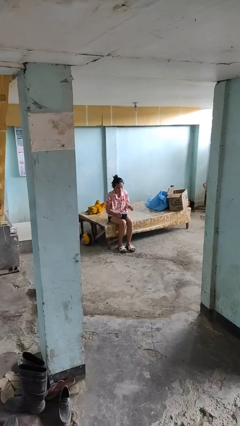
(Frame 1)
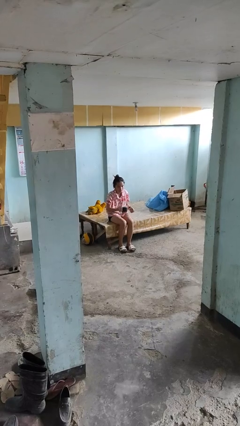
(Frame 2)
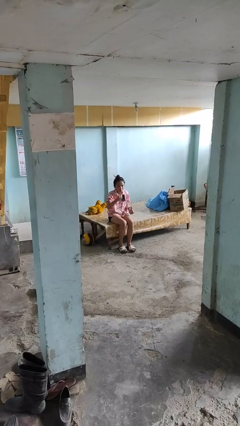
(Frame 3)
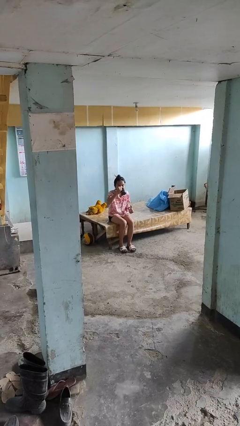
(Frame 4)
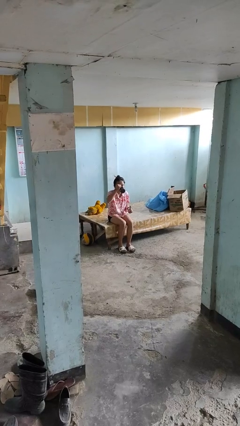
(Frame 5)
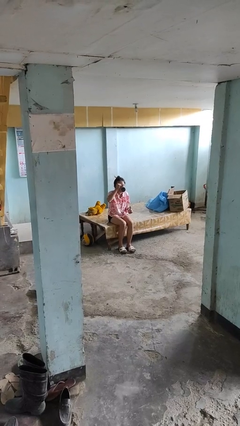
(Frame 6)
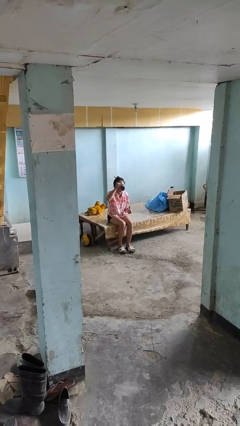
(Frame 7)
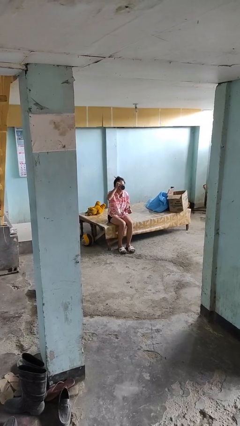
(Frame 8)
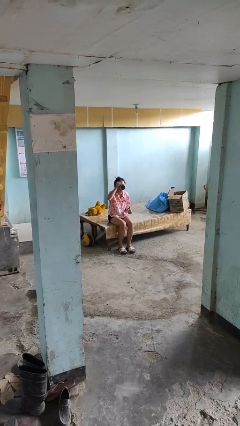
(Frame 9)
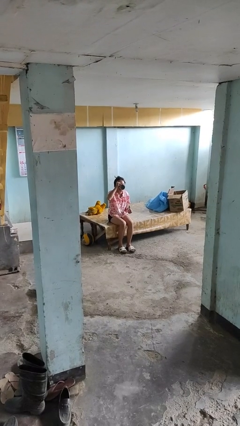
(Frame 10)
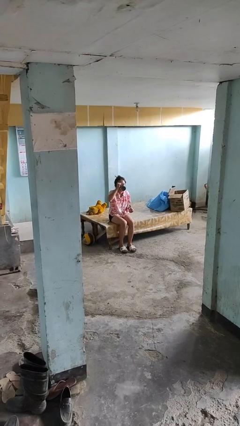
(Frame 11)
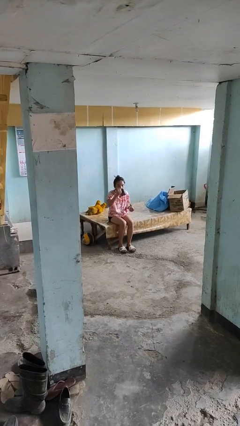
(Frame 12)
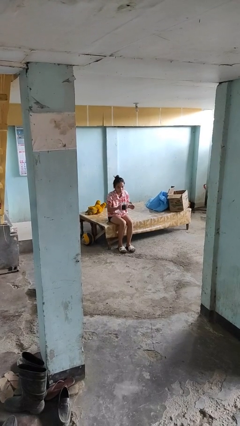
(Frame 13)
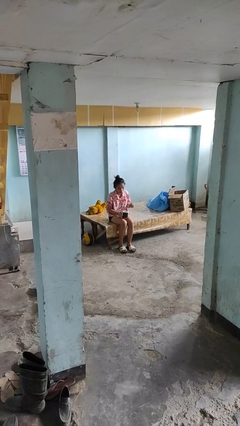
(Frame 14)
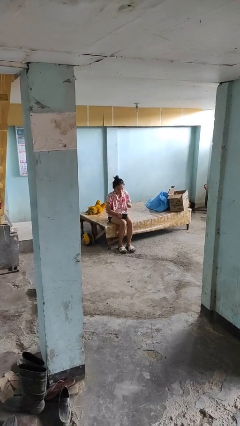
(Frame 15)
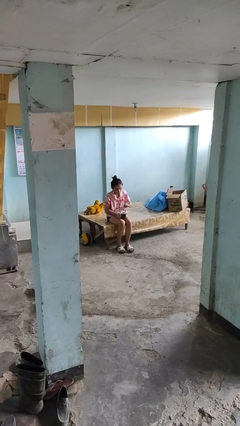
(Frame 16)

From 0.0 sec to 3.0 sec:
person drinks from mug

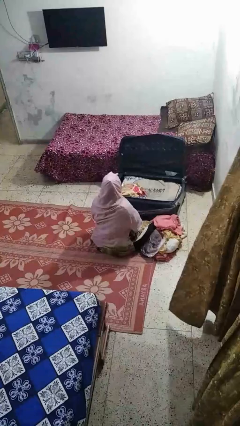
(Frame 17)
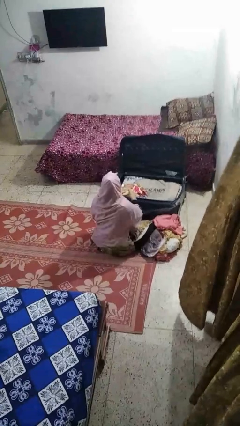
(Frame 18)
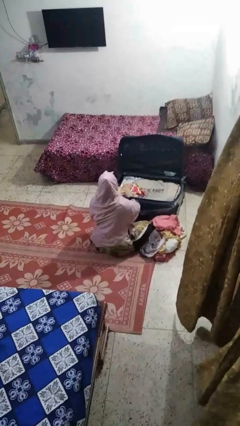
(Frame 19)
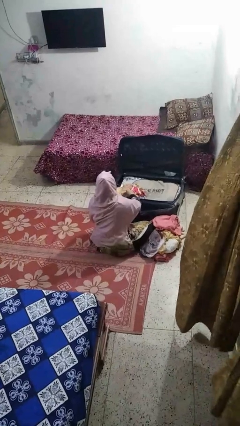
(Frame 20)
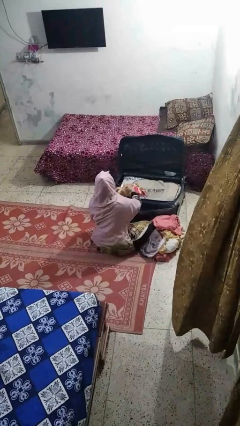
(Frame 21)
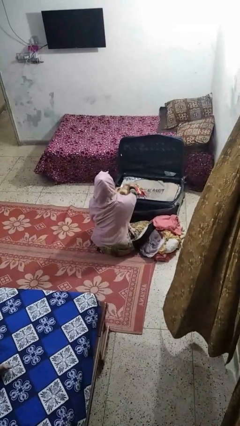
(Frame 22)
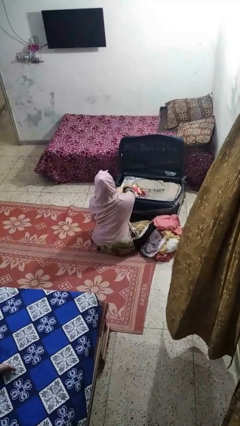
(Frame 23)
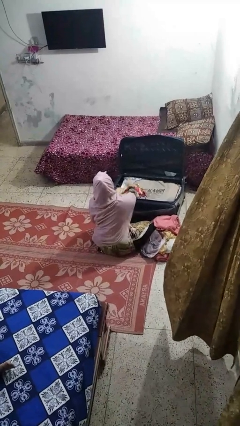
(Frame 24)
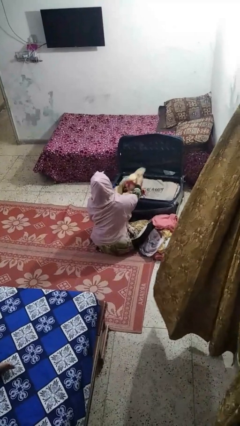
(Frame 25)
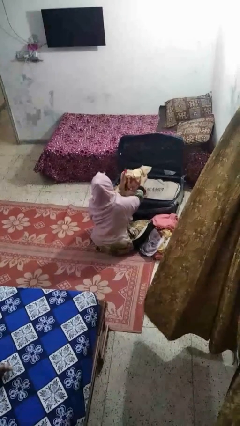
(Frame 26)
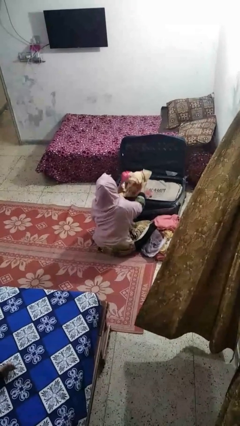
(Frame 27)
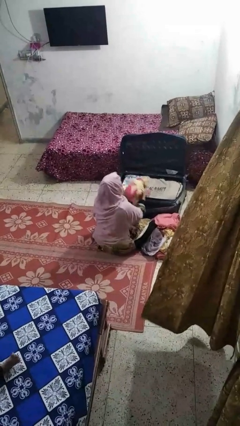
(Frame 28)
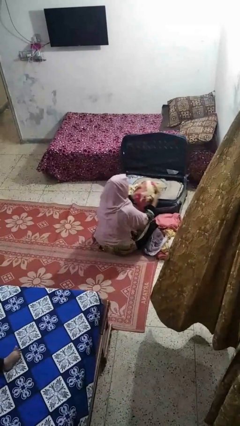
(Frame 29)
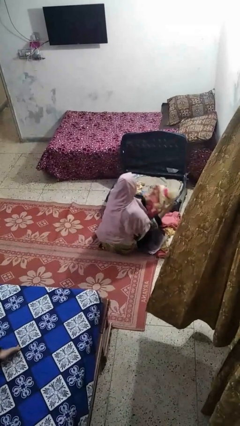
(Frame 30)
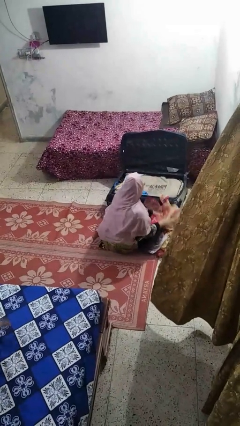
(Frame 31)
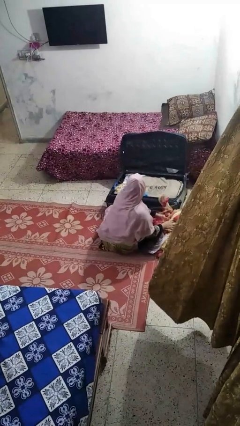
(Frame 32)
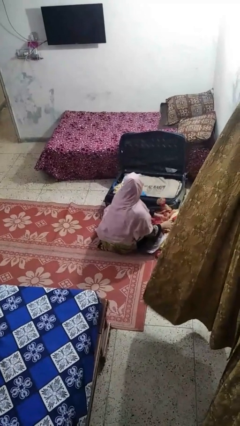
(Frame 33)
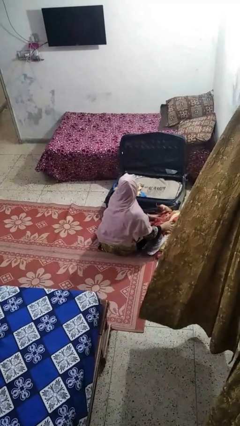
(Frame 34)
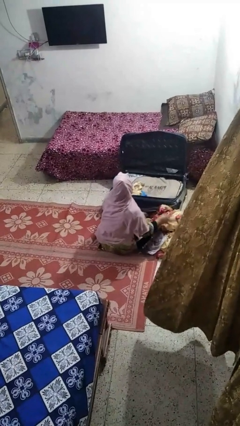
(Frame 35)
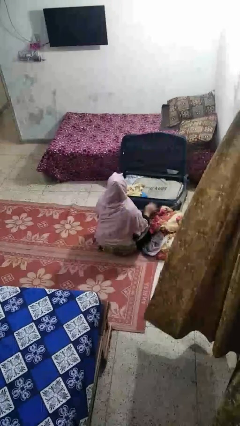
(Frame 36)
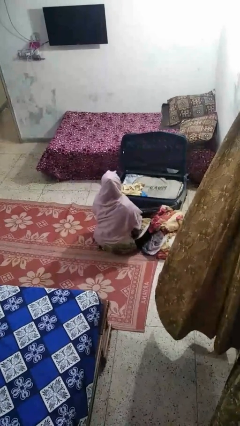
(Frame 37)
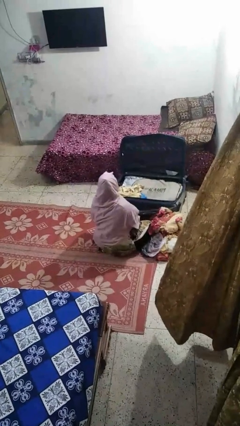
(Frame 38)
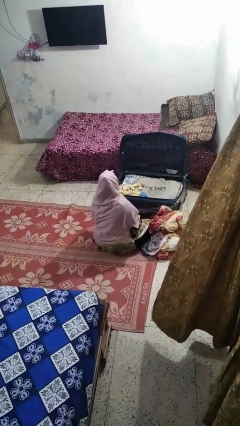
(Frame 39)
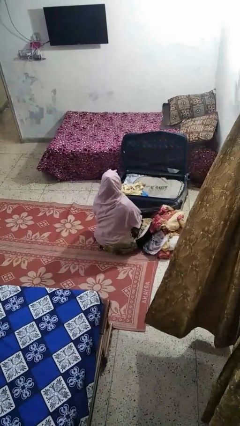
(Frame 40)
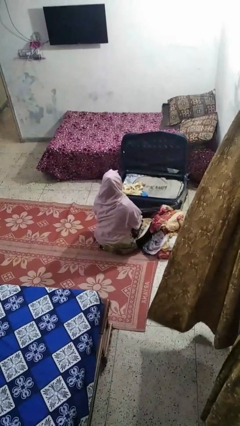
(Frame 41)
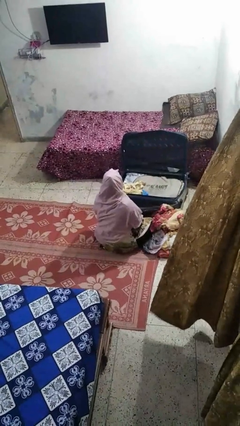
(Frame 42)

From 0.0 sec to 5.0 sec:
person unloads clothes from suitcase

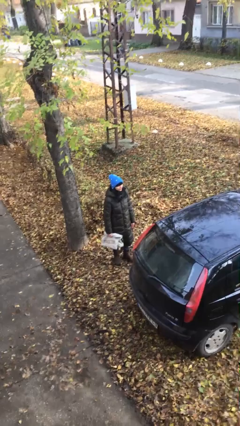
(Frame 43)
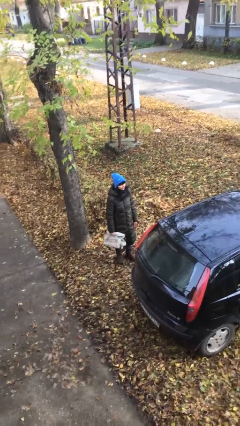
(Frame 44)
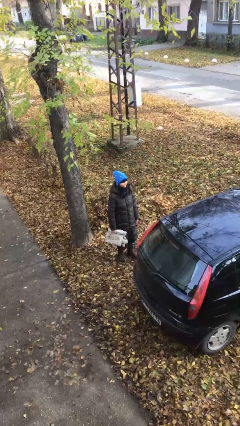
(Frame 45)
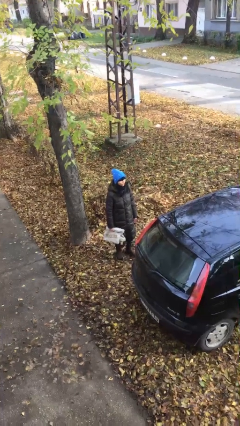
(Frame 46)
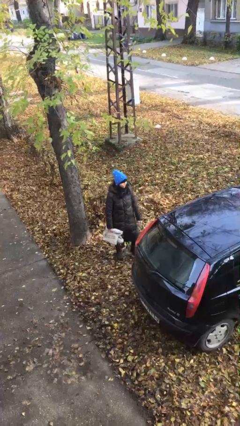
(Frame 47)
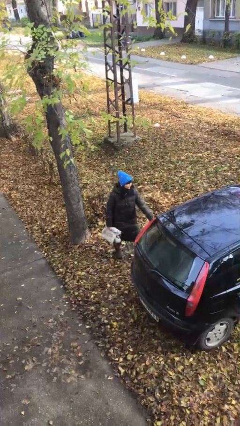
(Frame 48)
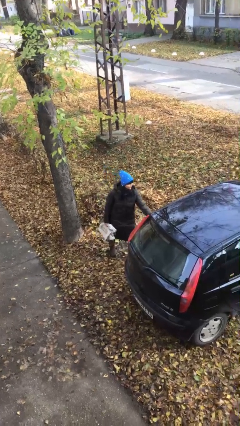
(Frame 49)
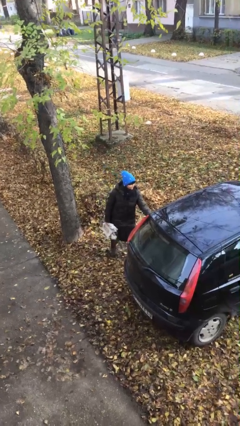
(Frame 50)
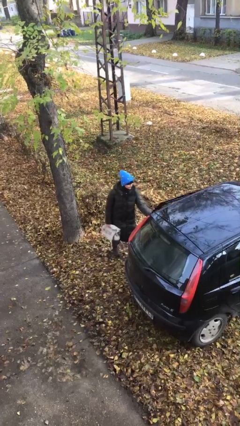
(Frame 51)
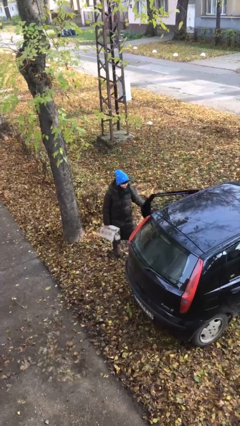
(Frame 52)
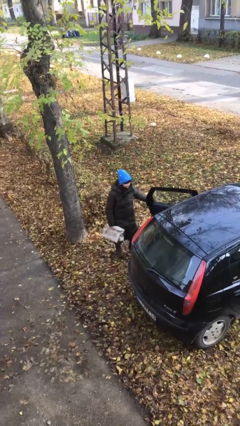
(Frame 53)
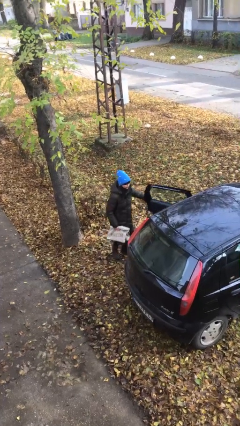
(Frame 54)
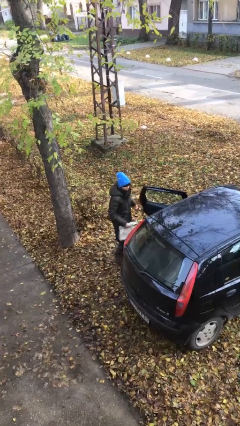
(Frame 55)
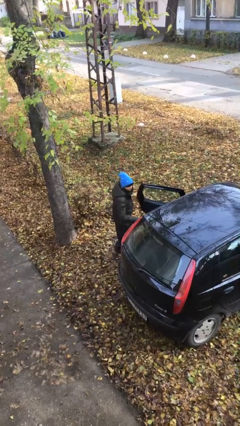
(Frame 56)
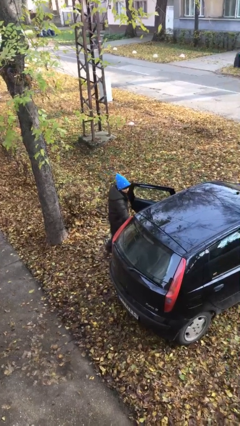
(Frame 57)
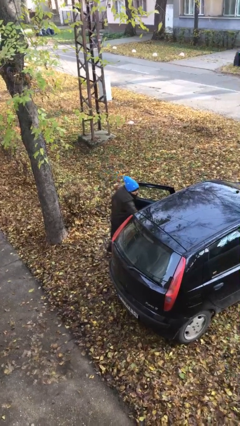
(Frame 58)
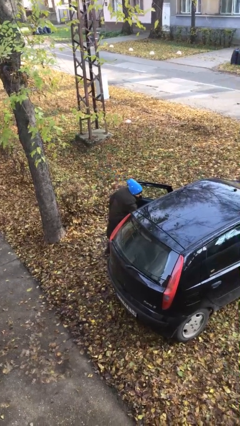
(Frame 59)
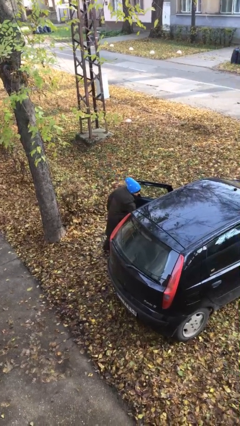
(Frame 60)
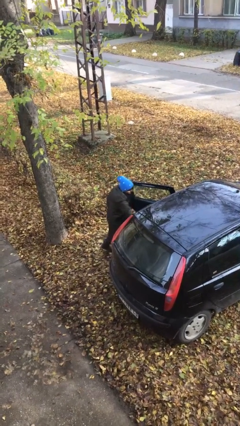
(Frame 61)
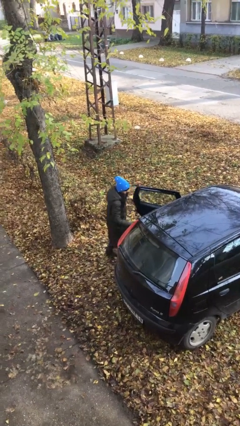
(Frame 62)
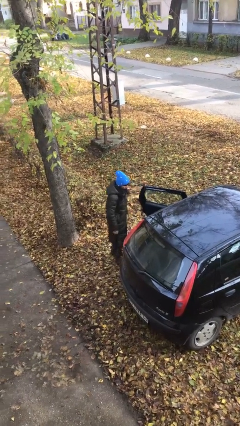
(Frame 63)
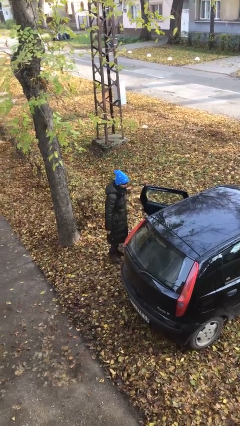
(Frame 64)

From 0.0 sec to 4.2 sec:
person loads car

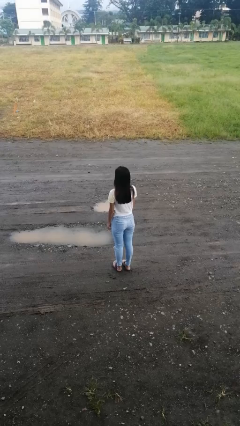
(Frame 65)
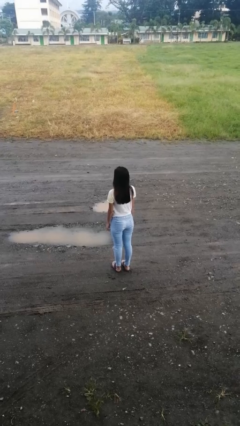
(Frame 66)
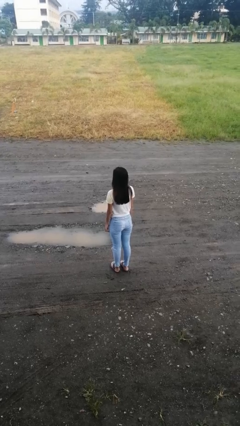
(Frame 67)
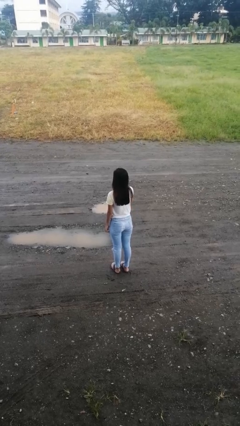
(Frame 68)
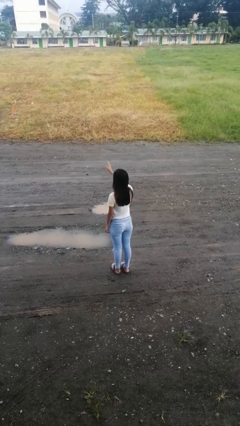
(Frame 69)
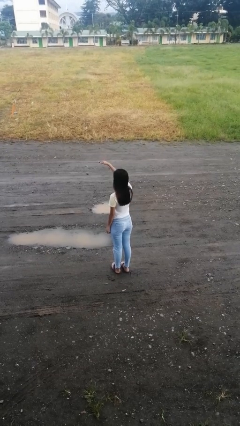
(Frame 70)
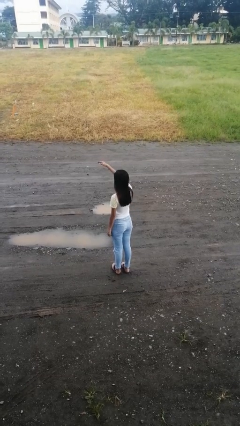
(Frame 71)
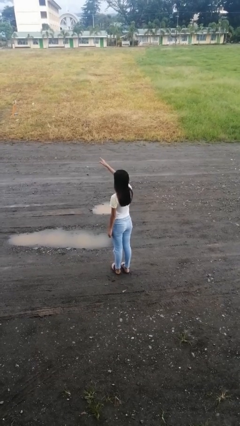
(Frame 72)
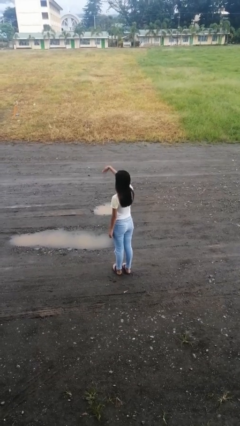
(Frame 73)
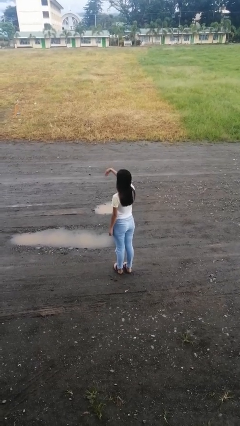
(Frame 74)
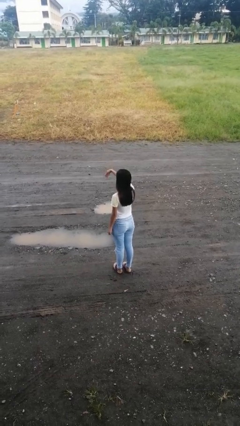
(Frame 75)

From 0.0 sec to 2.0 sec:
person gestures come here

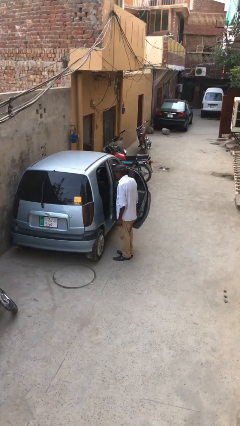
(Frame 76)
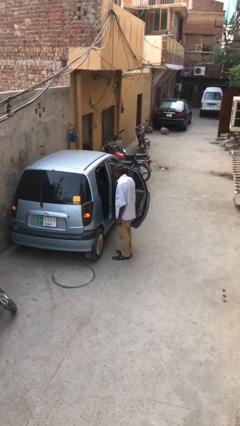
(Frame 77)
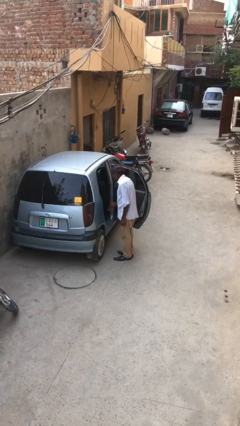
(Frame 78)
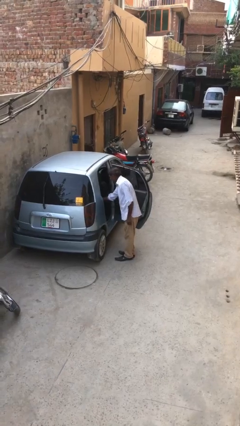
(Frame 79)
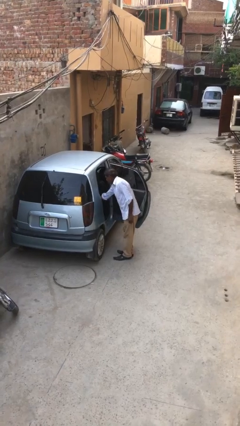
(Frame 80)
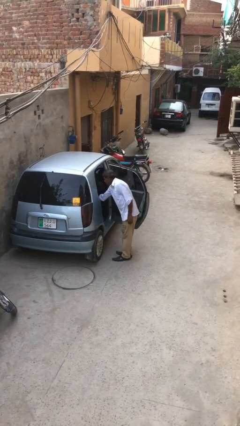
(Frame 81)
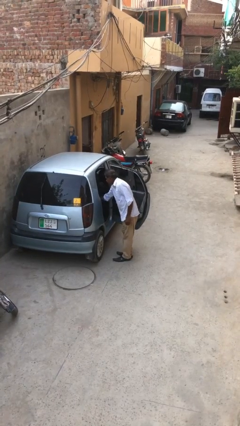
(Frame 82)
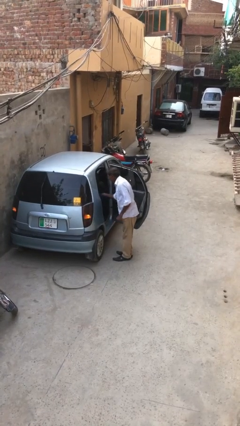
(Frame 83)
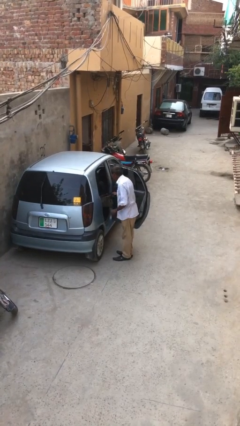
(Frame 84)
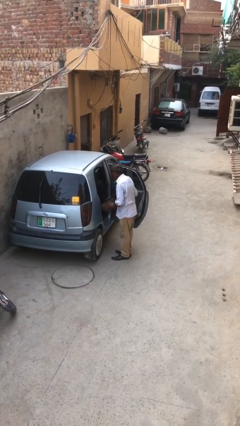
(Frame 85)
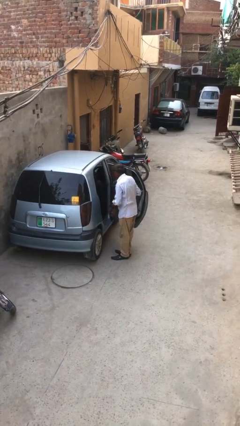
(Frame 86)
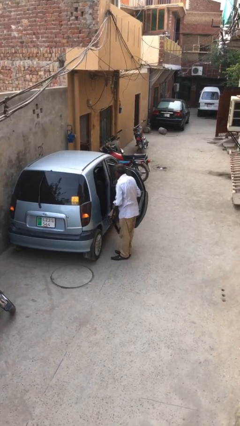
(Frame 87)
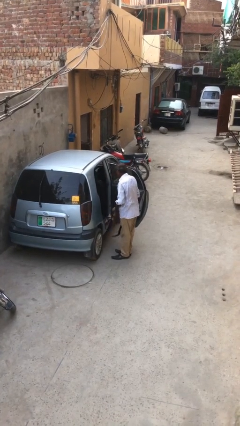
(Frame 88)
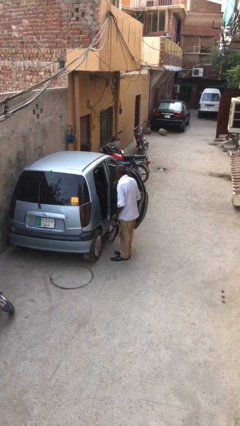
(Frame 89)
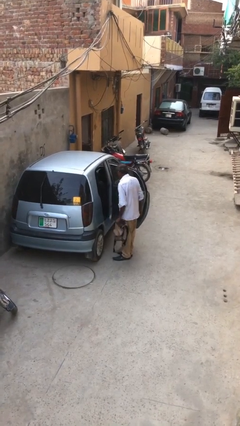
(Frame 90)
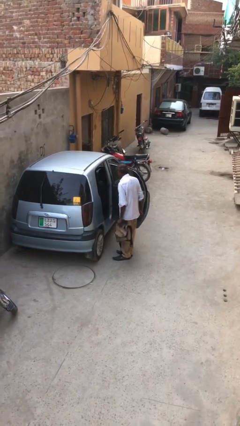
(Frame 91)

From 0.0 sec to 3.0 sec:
person unloads car

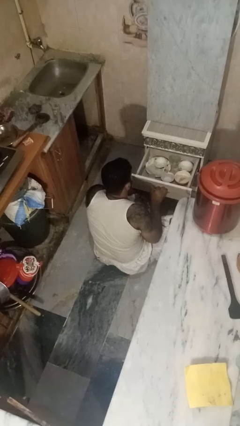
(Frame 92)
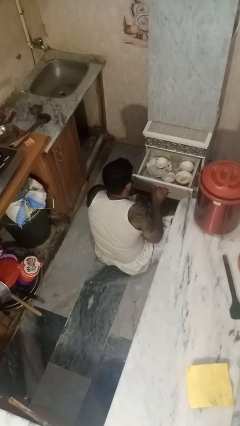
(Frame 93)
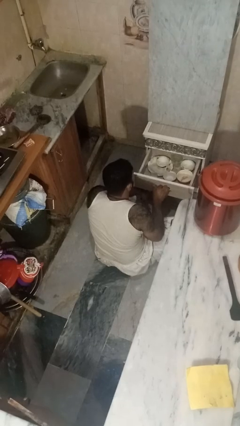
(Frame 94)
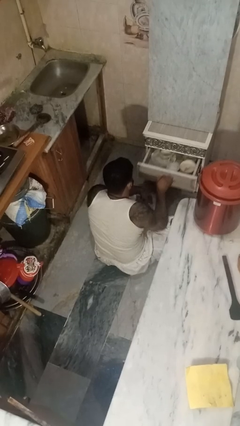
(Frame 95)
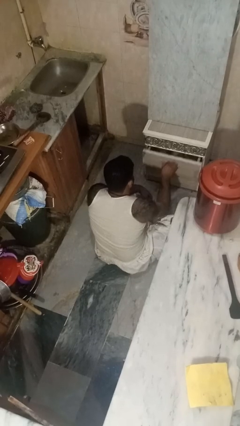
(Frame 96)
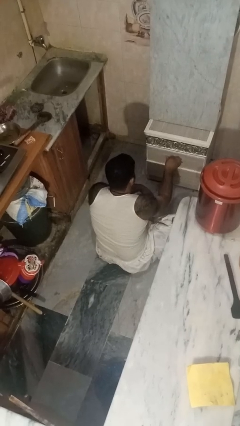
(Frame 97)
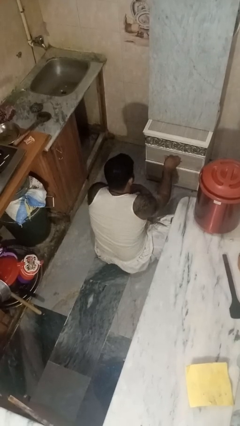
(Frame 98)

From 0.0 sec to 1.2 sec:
person closes kitchen drawer
